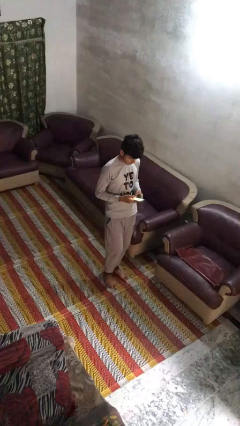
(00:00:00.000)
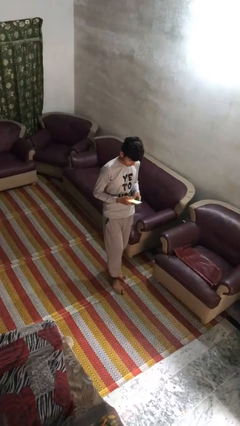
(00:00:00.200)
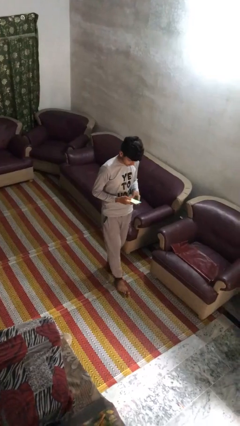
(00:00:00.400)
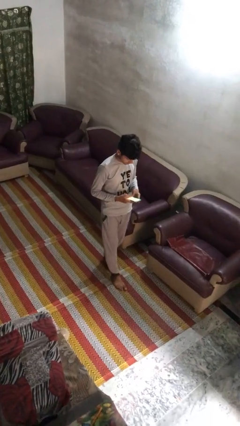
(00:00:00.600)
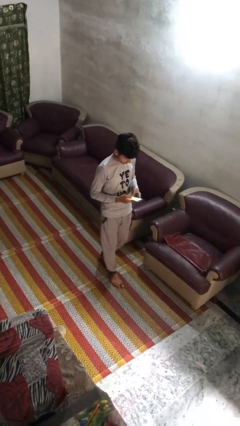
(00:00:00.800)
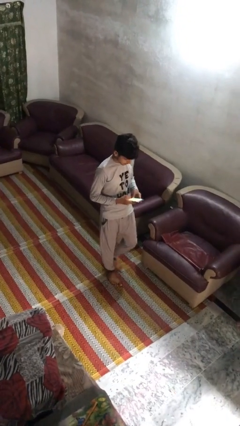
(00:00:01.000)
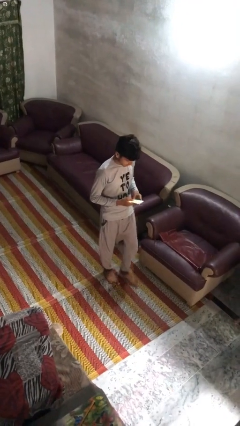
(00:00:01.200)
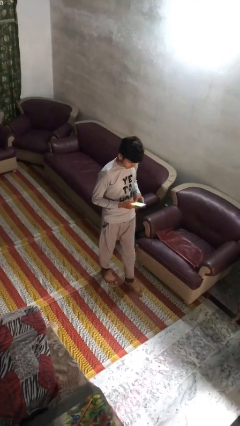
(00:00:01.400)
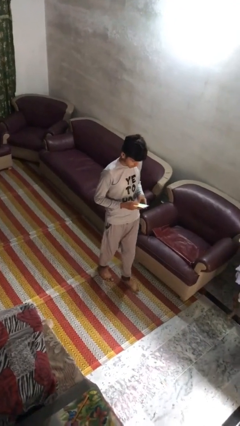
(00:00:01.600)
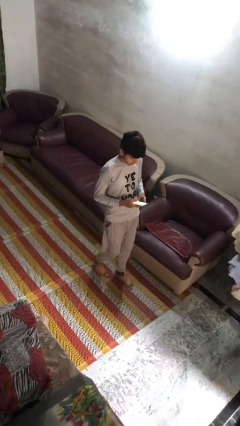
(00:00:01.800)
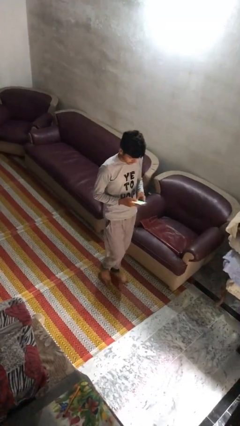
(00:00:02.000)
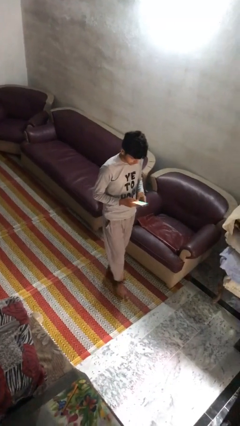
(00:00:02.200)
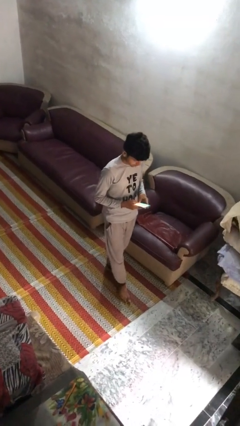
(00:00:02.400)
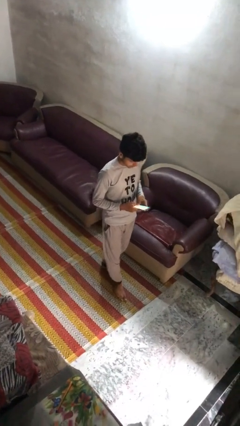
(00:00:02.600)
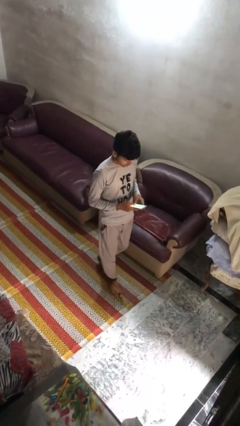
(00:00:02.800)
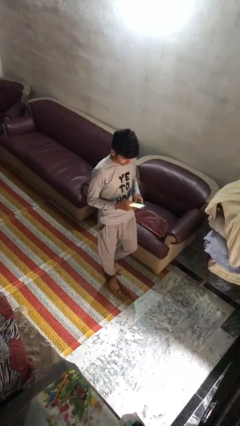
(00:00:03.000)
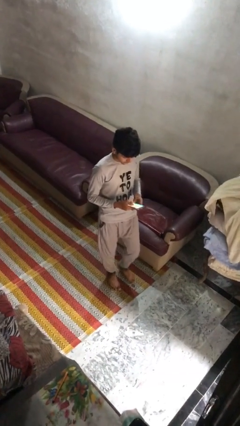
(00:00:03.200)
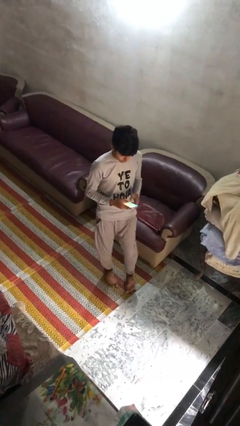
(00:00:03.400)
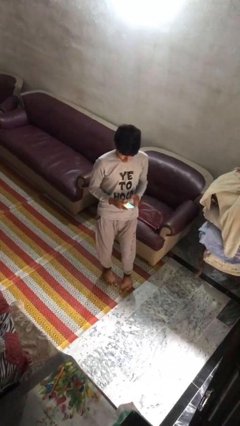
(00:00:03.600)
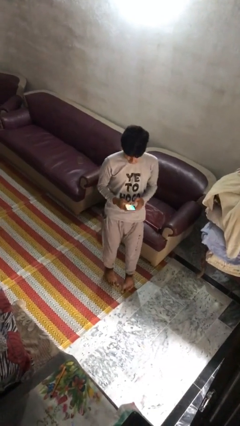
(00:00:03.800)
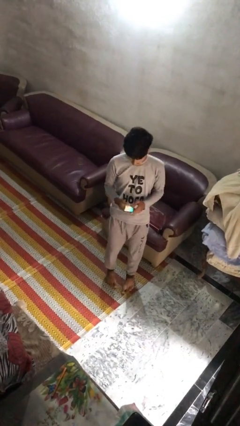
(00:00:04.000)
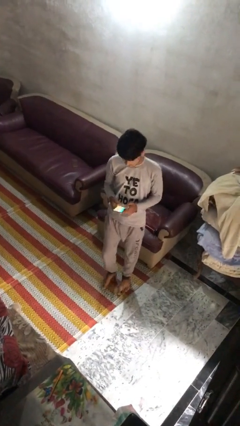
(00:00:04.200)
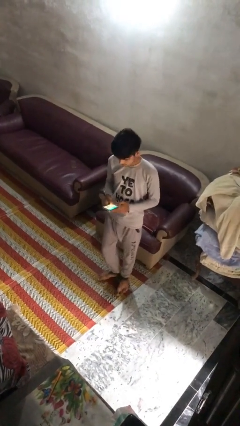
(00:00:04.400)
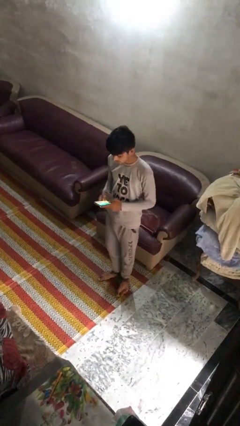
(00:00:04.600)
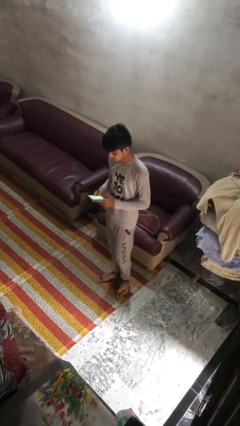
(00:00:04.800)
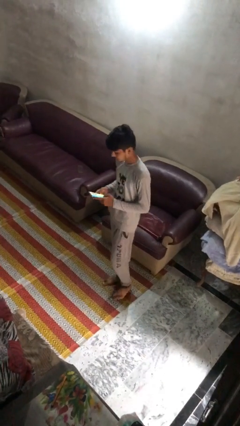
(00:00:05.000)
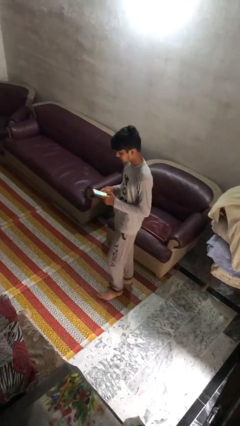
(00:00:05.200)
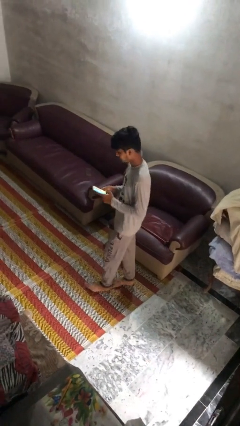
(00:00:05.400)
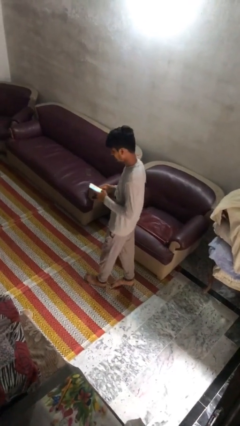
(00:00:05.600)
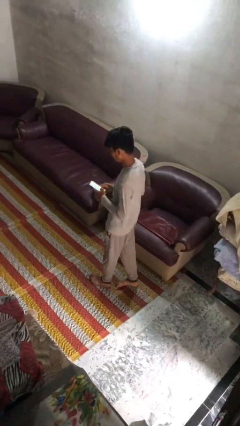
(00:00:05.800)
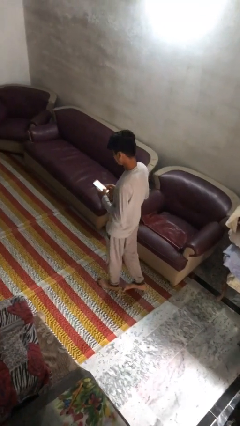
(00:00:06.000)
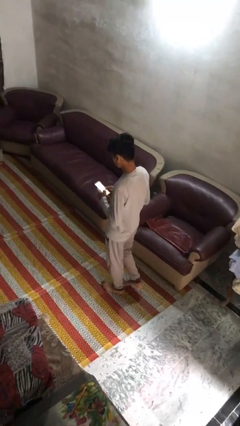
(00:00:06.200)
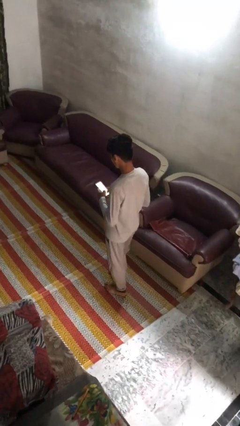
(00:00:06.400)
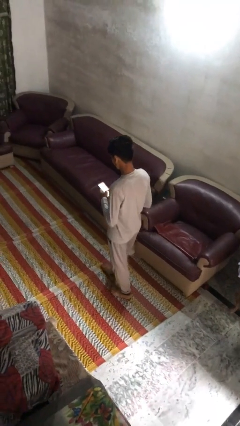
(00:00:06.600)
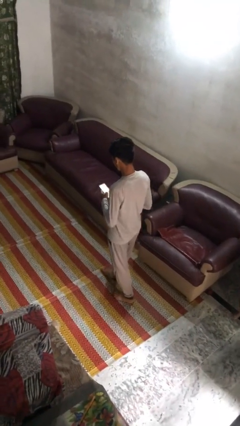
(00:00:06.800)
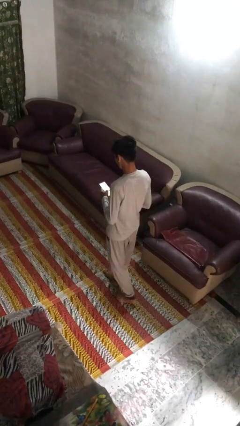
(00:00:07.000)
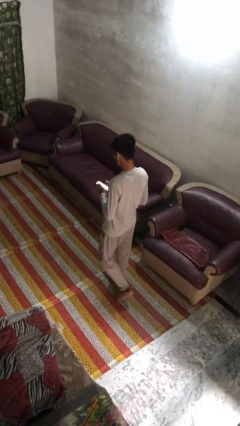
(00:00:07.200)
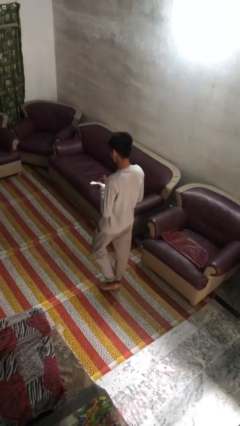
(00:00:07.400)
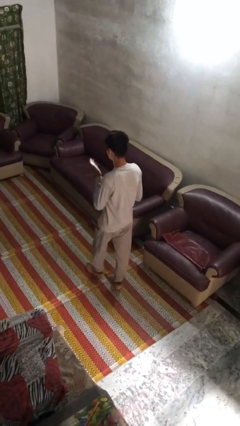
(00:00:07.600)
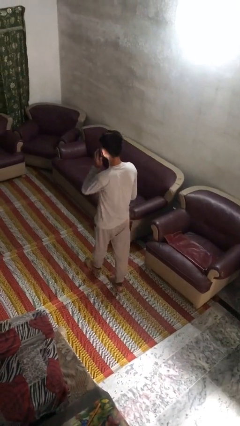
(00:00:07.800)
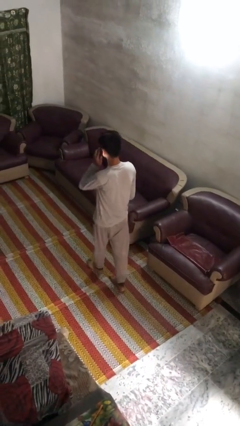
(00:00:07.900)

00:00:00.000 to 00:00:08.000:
person texts on phone

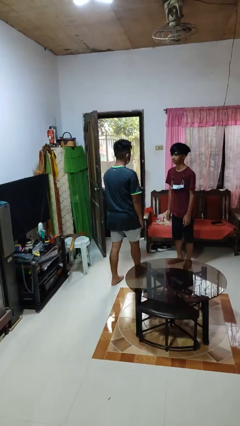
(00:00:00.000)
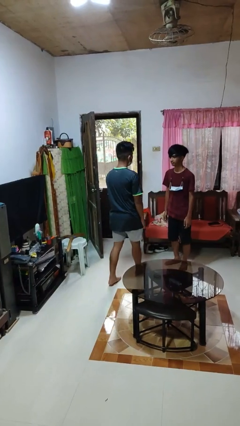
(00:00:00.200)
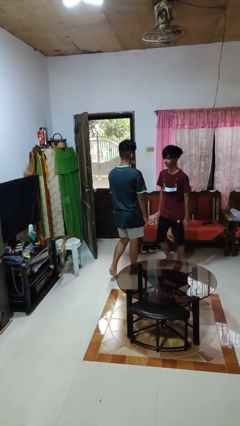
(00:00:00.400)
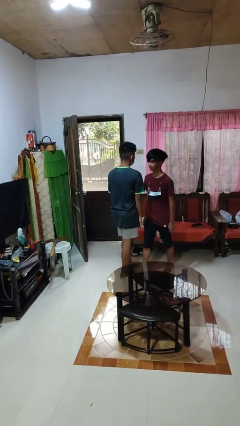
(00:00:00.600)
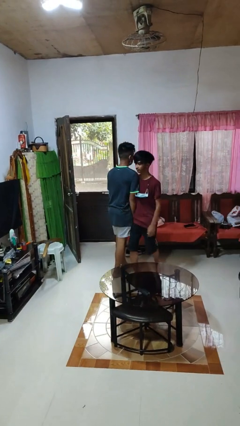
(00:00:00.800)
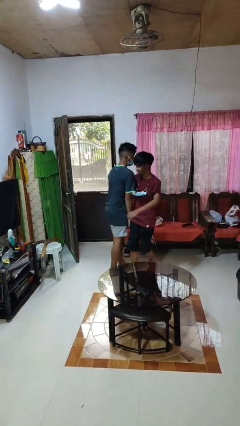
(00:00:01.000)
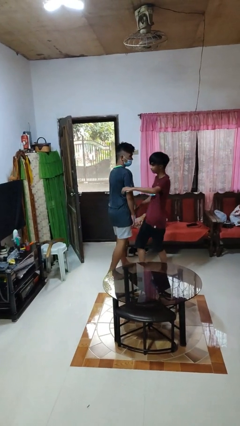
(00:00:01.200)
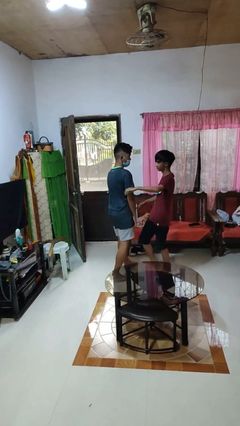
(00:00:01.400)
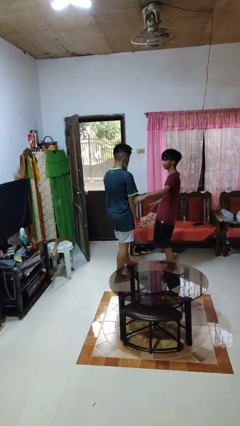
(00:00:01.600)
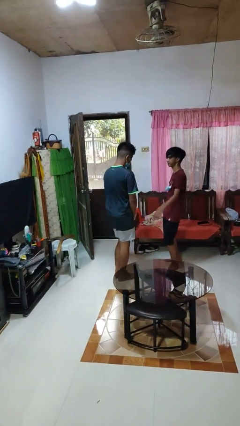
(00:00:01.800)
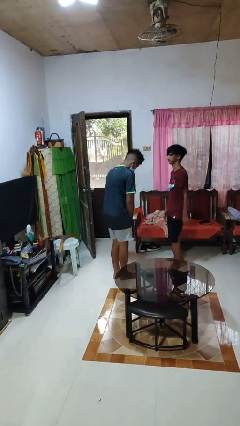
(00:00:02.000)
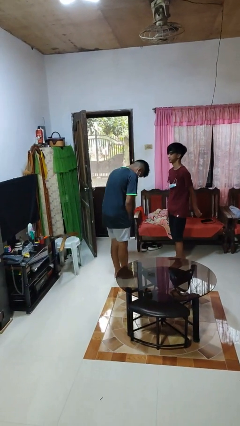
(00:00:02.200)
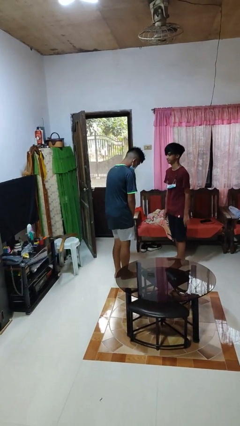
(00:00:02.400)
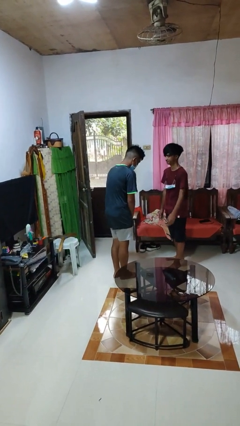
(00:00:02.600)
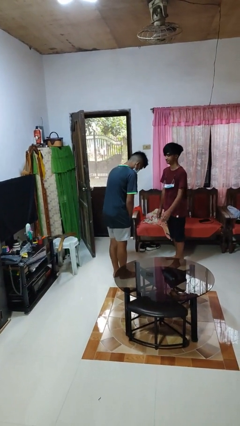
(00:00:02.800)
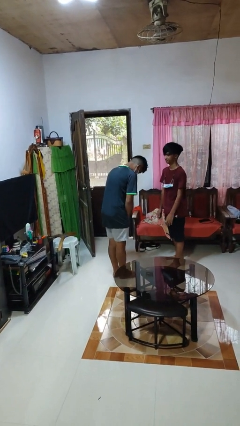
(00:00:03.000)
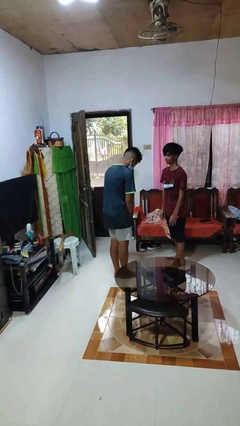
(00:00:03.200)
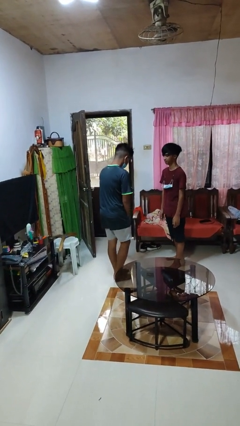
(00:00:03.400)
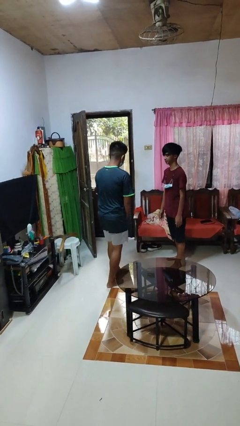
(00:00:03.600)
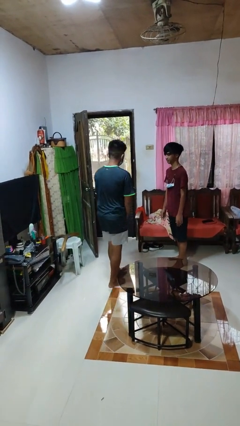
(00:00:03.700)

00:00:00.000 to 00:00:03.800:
person bumps into person

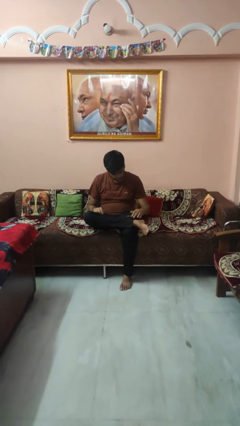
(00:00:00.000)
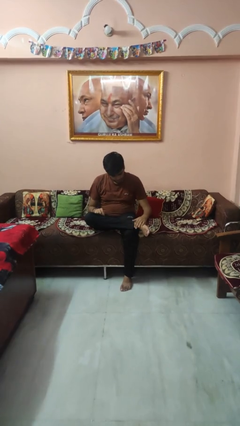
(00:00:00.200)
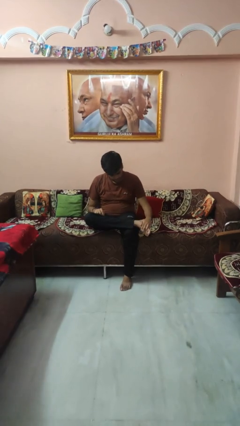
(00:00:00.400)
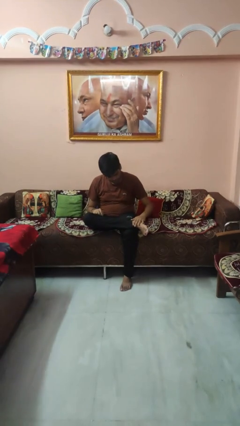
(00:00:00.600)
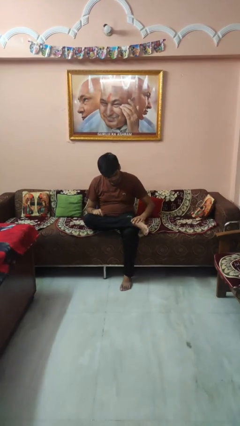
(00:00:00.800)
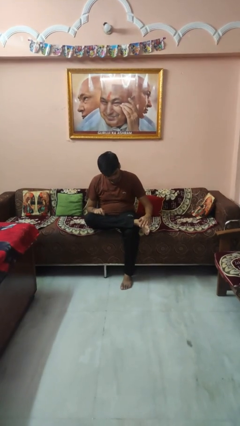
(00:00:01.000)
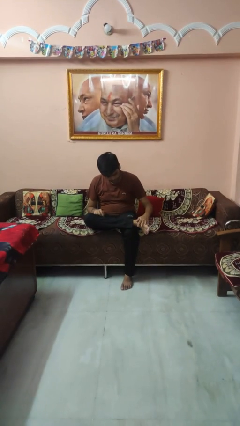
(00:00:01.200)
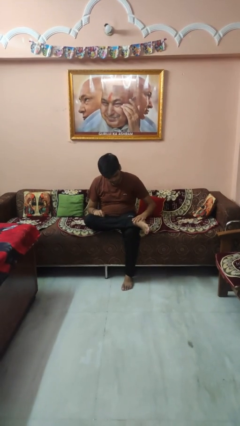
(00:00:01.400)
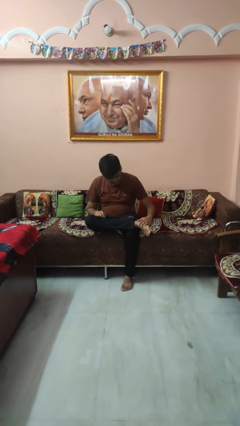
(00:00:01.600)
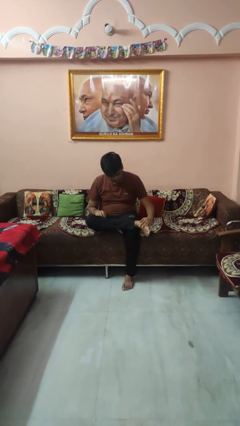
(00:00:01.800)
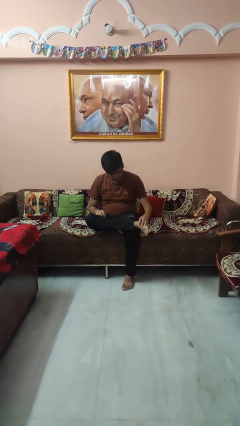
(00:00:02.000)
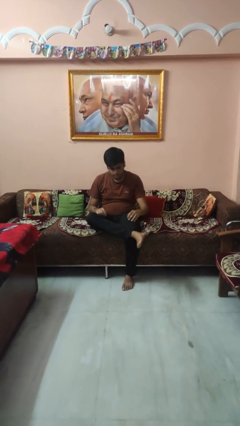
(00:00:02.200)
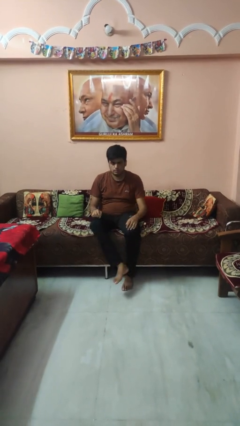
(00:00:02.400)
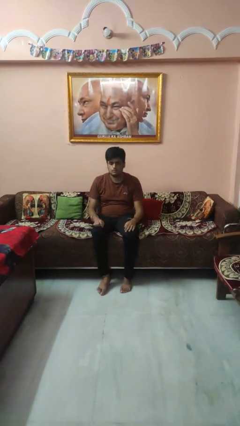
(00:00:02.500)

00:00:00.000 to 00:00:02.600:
person rubs foot

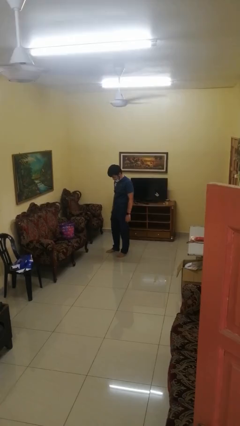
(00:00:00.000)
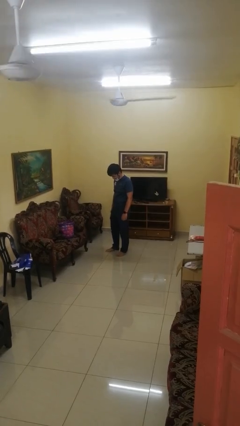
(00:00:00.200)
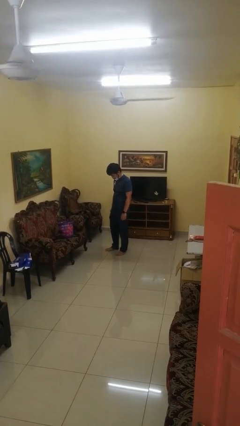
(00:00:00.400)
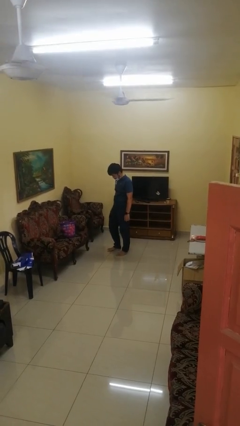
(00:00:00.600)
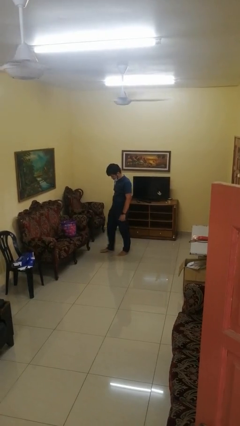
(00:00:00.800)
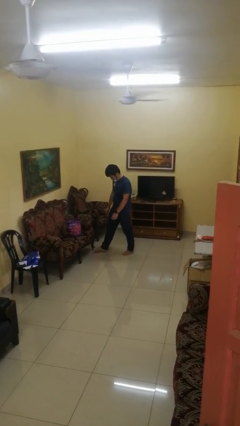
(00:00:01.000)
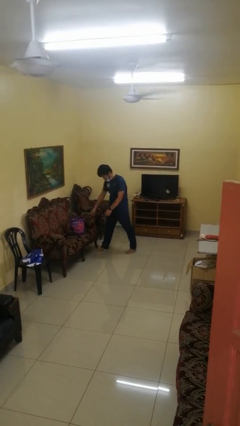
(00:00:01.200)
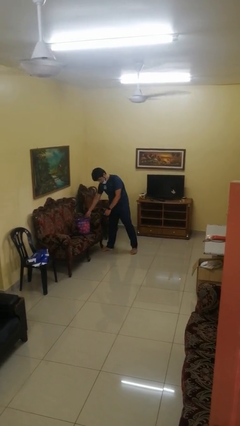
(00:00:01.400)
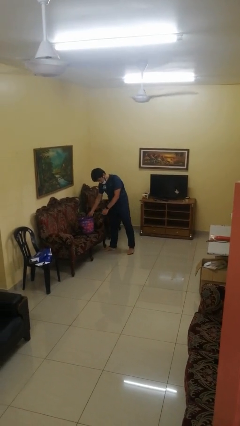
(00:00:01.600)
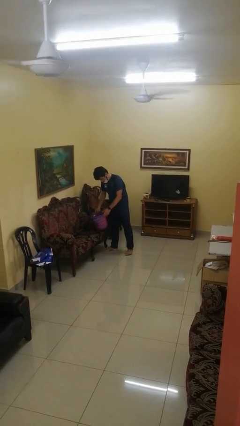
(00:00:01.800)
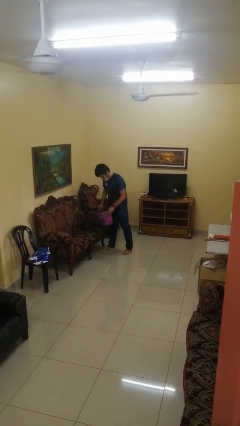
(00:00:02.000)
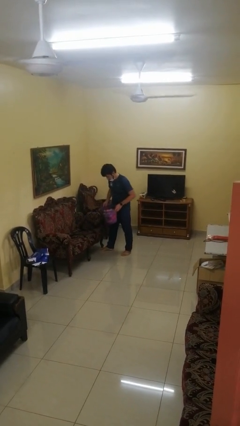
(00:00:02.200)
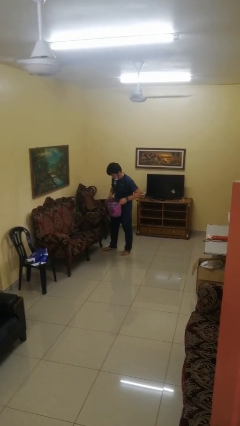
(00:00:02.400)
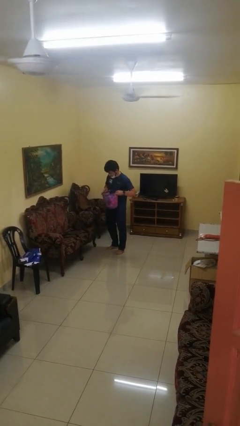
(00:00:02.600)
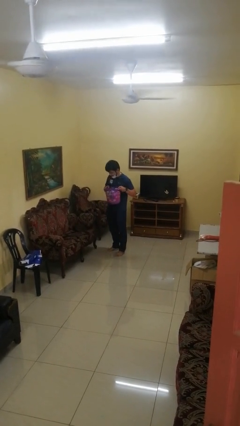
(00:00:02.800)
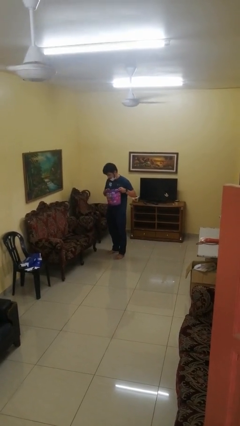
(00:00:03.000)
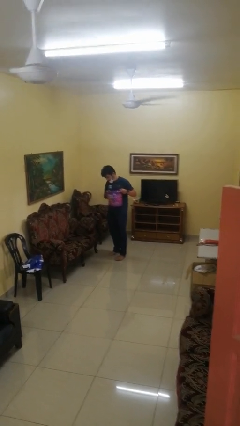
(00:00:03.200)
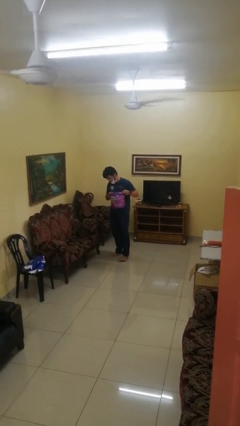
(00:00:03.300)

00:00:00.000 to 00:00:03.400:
person picks up object from couch
